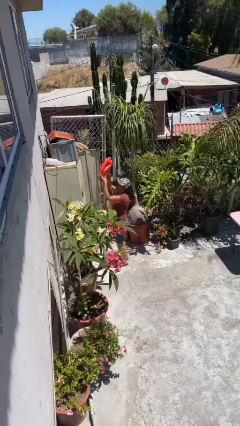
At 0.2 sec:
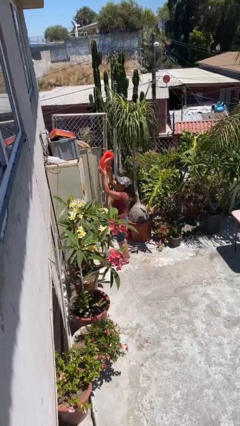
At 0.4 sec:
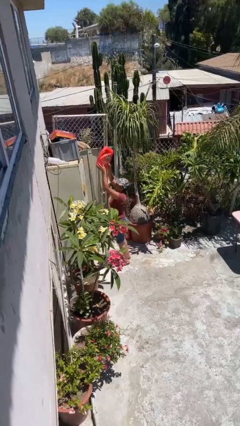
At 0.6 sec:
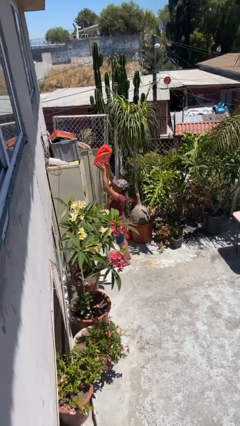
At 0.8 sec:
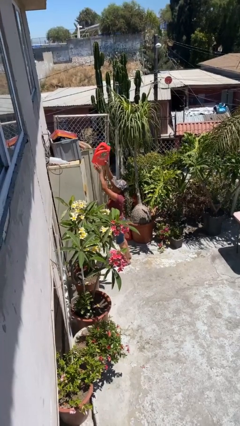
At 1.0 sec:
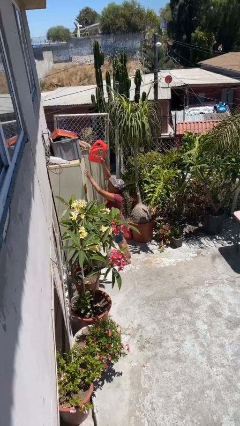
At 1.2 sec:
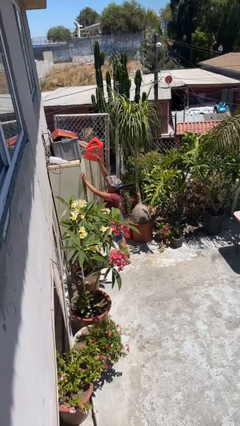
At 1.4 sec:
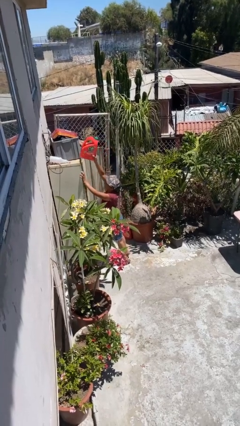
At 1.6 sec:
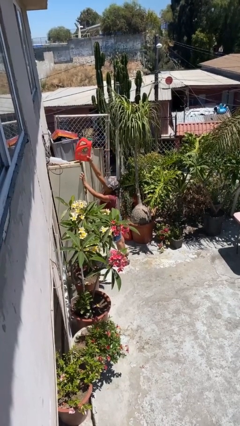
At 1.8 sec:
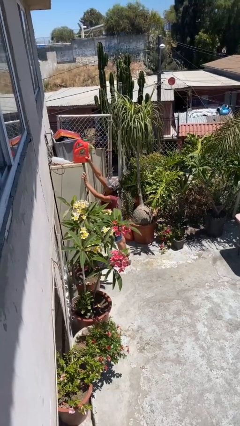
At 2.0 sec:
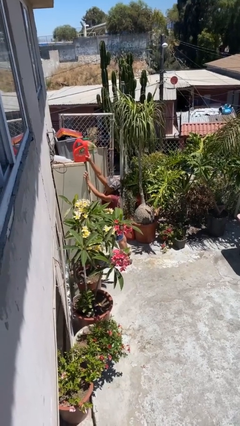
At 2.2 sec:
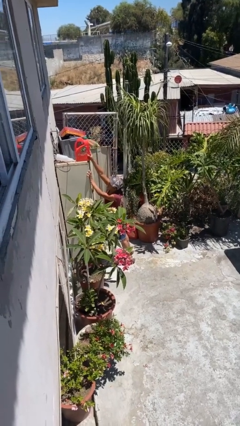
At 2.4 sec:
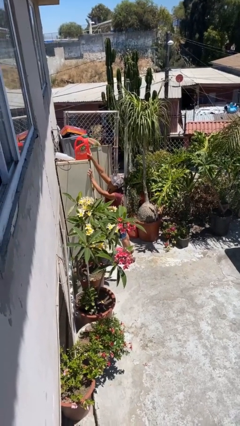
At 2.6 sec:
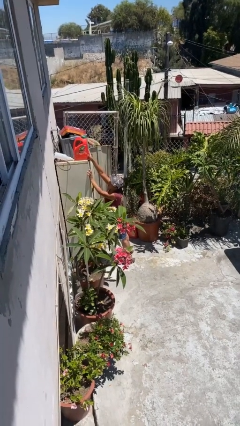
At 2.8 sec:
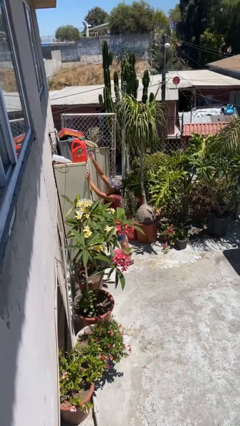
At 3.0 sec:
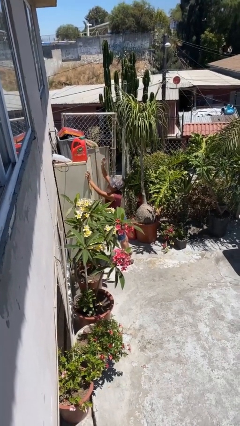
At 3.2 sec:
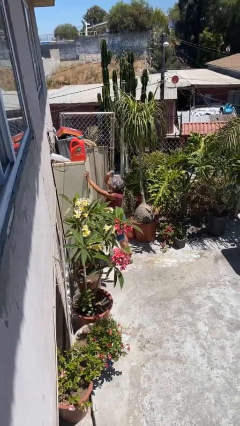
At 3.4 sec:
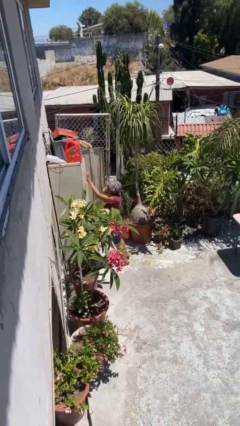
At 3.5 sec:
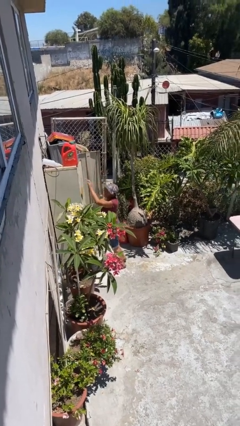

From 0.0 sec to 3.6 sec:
person puts down object on shelf

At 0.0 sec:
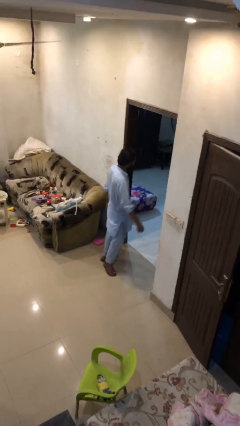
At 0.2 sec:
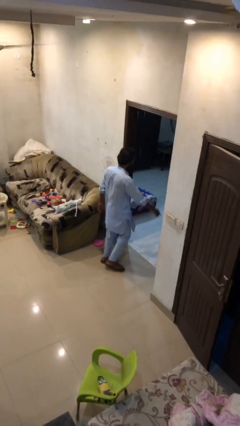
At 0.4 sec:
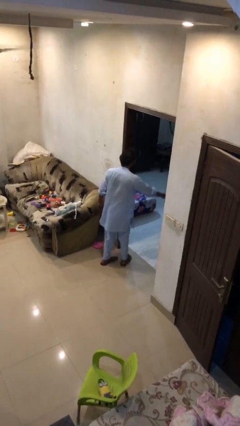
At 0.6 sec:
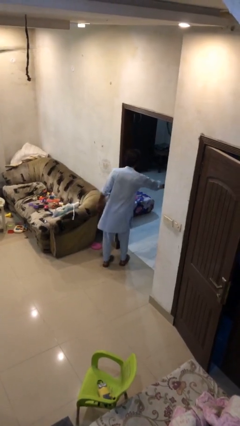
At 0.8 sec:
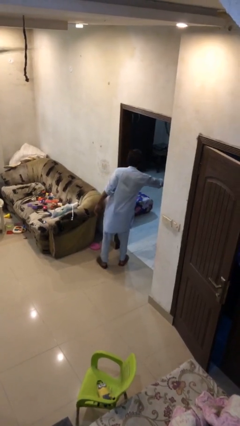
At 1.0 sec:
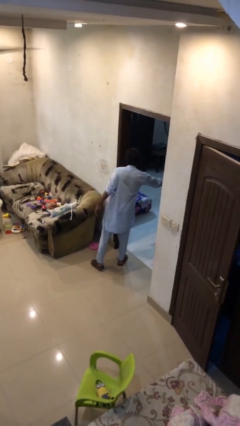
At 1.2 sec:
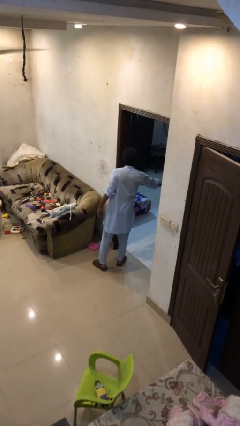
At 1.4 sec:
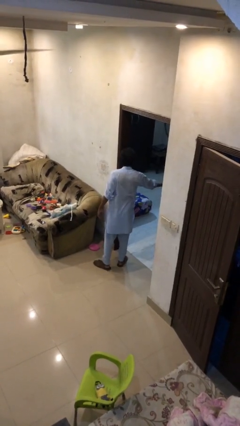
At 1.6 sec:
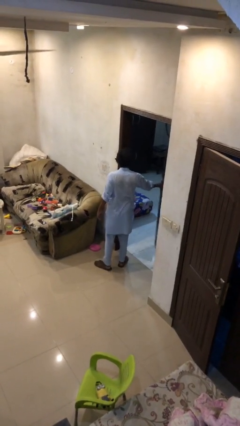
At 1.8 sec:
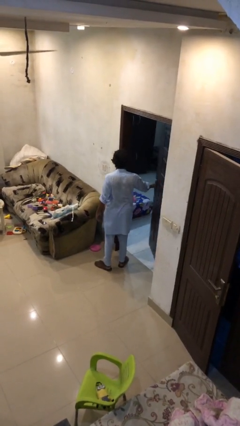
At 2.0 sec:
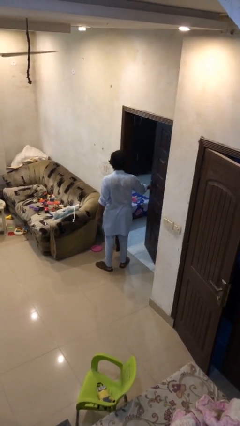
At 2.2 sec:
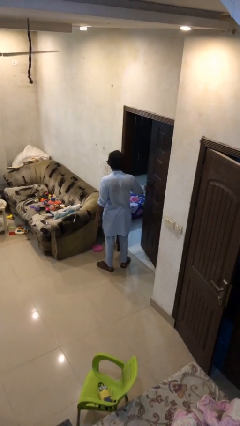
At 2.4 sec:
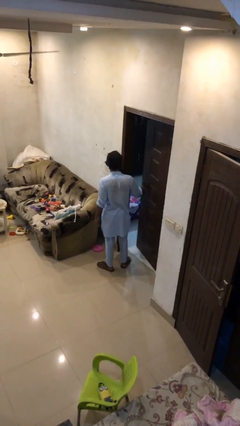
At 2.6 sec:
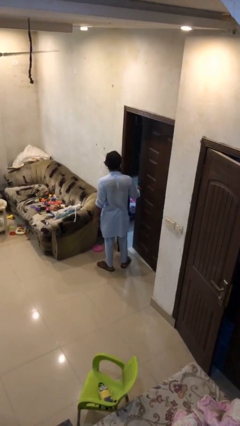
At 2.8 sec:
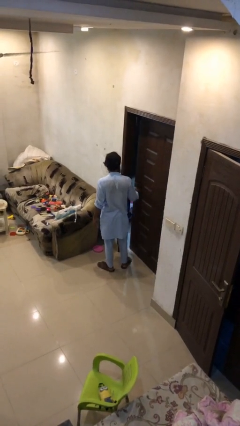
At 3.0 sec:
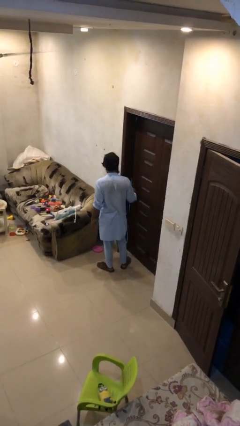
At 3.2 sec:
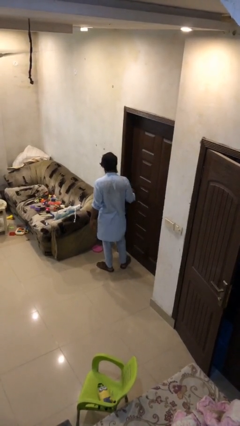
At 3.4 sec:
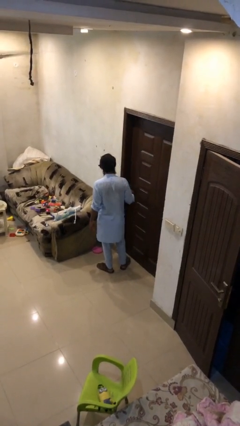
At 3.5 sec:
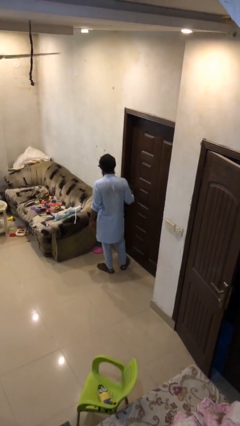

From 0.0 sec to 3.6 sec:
person closes facility door

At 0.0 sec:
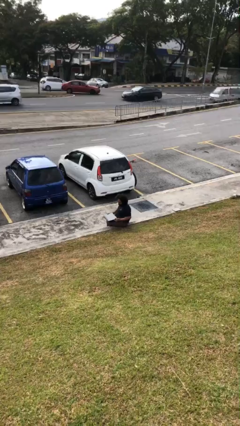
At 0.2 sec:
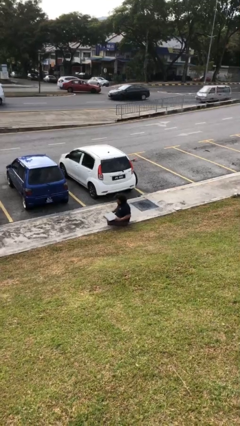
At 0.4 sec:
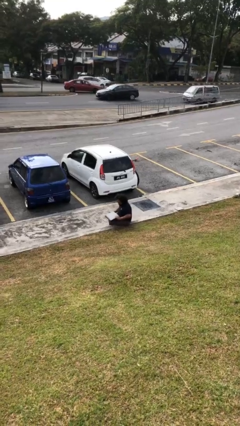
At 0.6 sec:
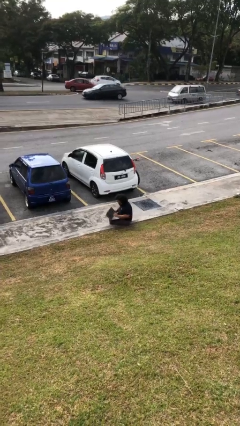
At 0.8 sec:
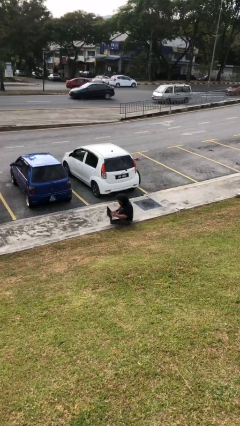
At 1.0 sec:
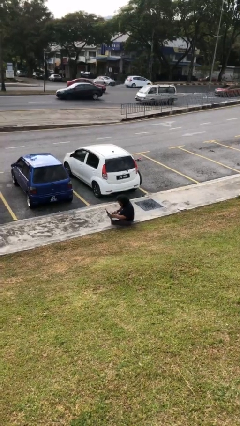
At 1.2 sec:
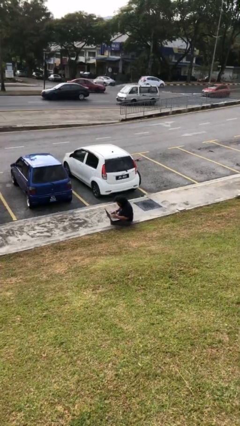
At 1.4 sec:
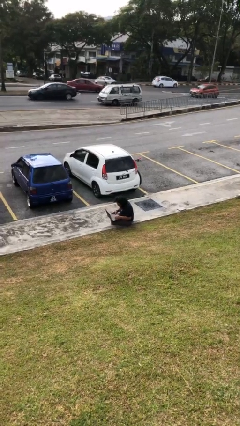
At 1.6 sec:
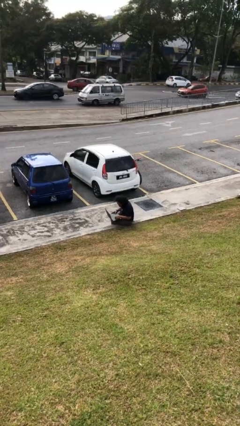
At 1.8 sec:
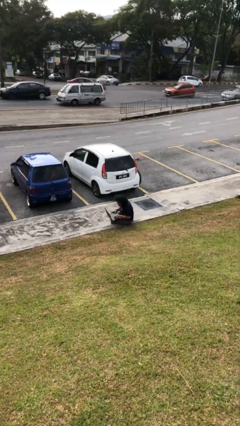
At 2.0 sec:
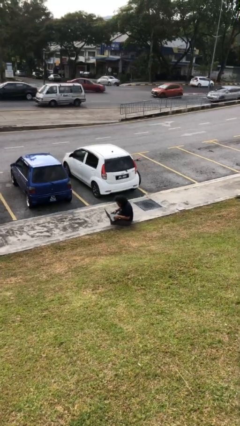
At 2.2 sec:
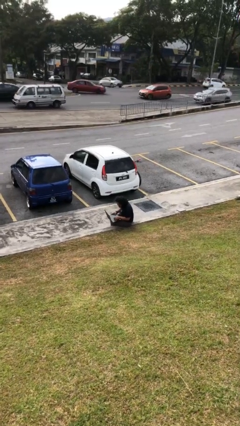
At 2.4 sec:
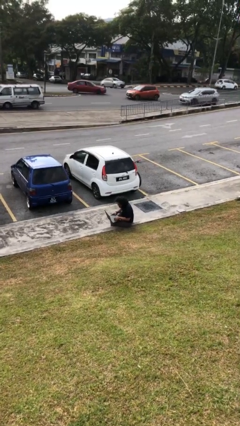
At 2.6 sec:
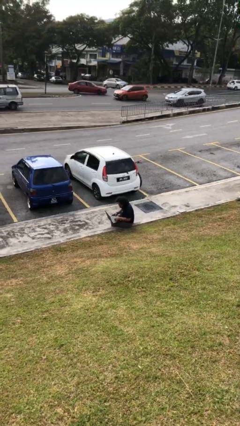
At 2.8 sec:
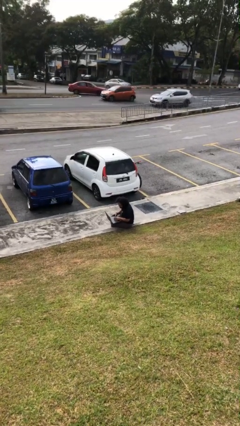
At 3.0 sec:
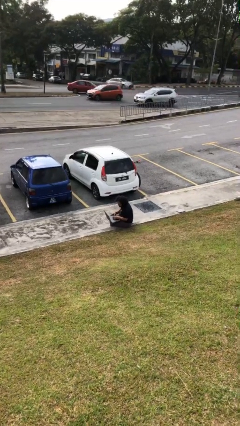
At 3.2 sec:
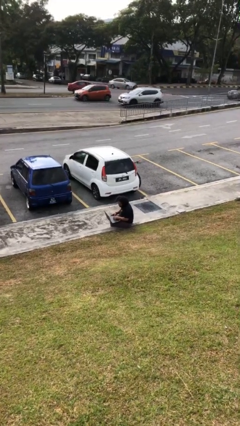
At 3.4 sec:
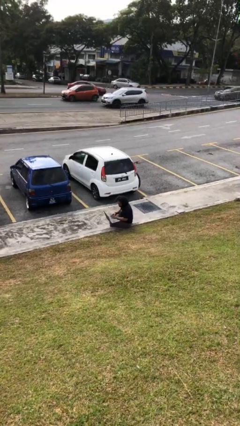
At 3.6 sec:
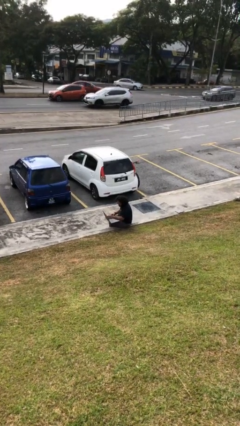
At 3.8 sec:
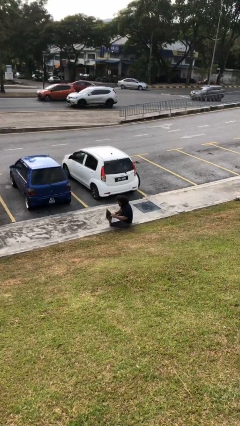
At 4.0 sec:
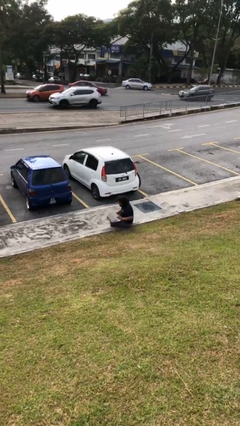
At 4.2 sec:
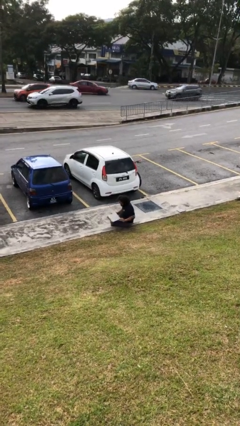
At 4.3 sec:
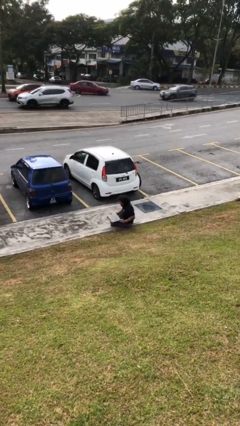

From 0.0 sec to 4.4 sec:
person interacts with laptop

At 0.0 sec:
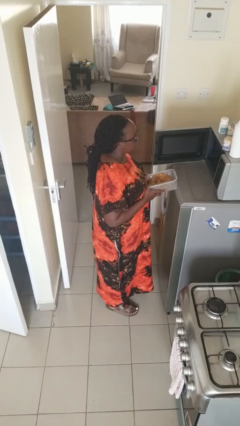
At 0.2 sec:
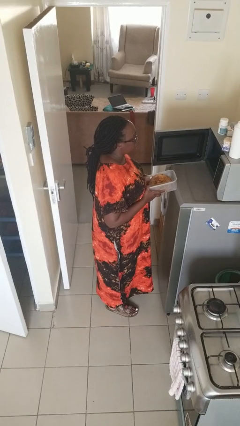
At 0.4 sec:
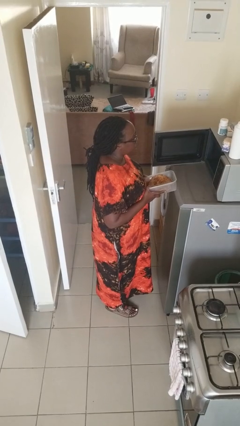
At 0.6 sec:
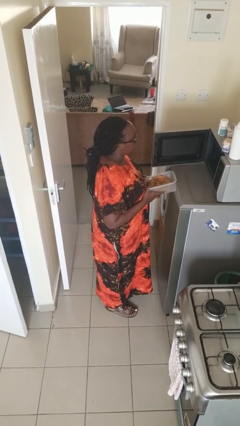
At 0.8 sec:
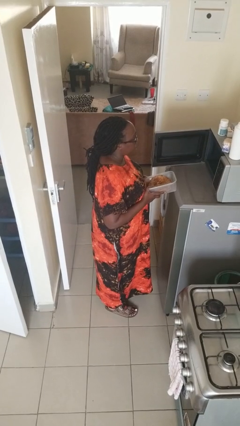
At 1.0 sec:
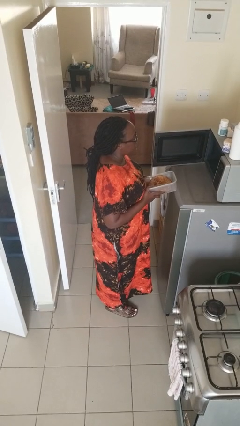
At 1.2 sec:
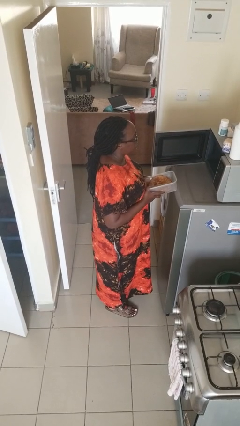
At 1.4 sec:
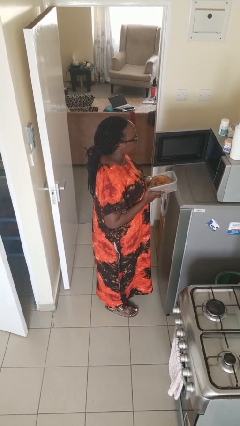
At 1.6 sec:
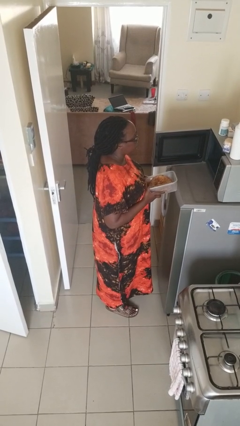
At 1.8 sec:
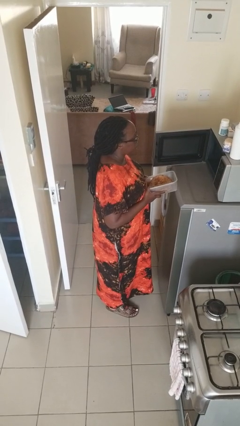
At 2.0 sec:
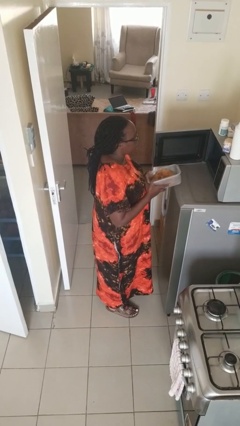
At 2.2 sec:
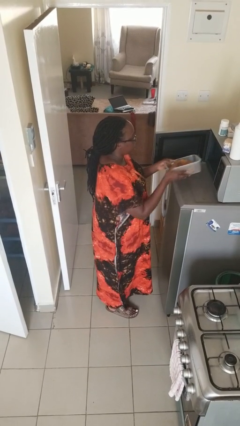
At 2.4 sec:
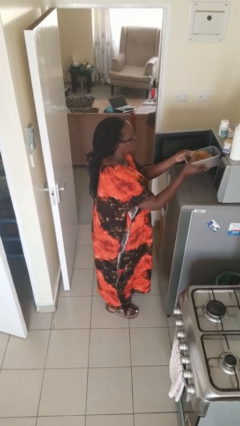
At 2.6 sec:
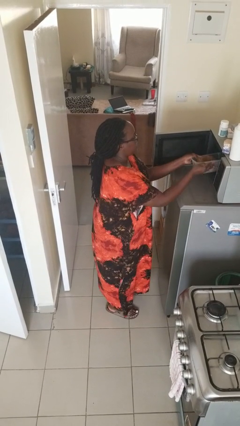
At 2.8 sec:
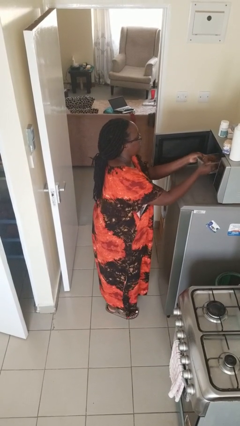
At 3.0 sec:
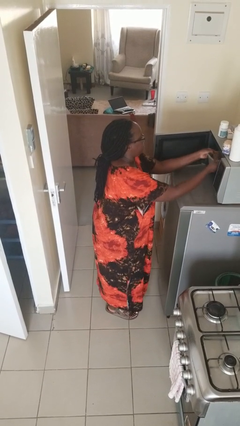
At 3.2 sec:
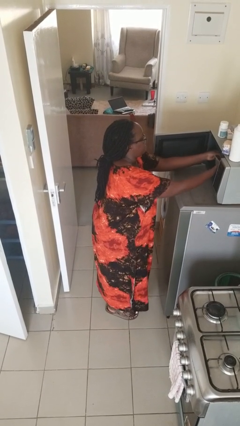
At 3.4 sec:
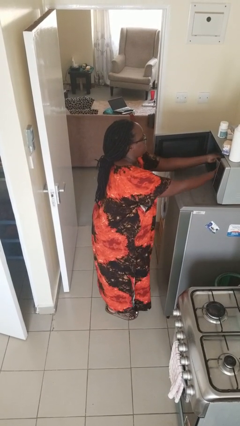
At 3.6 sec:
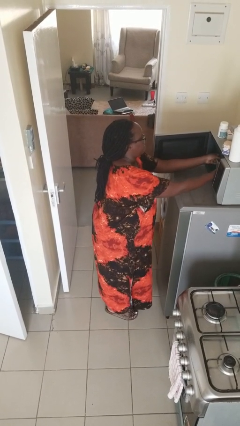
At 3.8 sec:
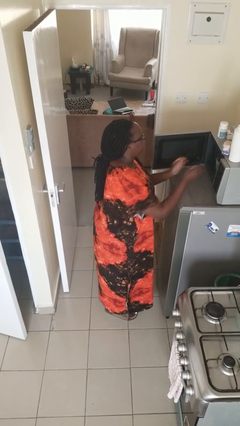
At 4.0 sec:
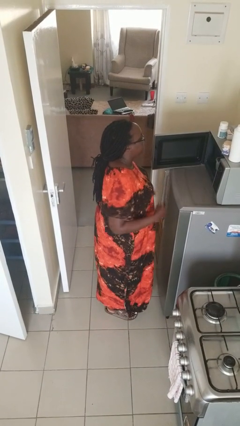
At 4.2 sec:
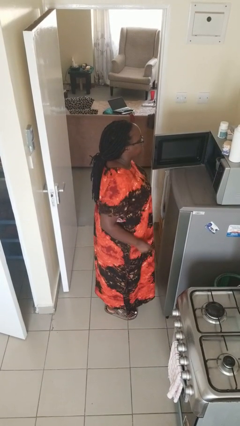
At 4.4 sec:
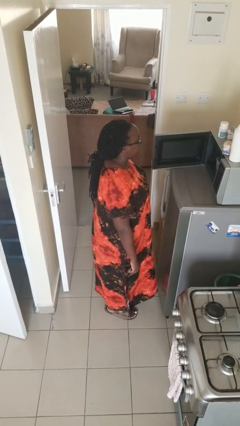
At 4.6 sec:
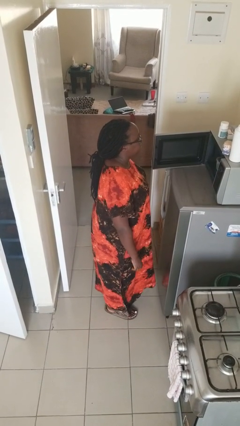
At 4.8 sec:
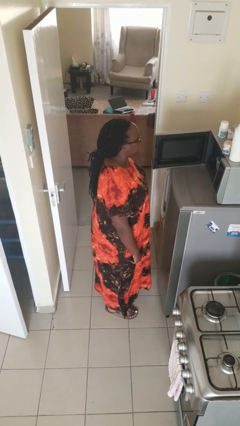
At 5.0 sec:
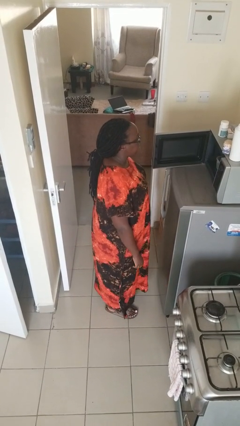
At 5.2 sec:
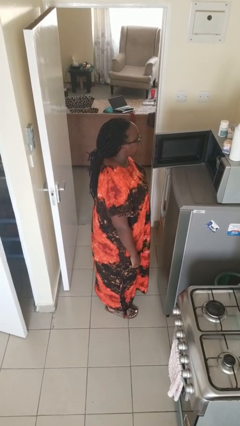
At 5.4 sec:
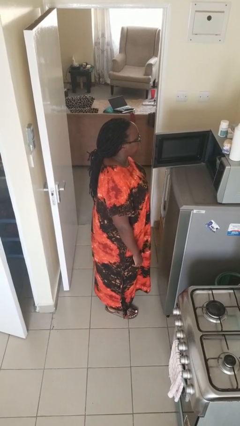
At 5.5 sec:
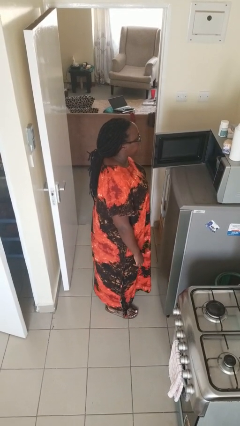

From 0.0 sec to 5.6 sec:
person puts object into microwave

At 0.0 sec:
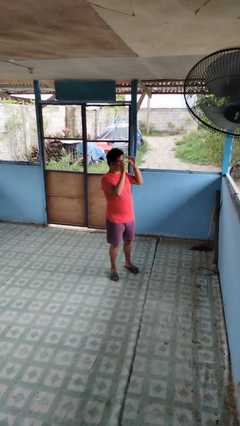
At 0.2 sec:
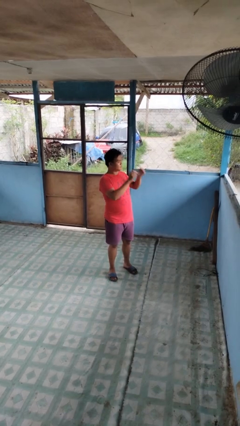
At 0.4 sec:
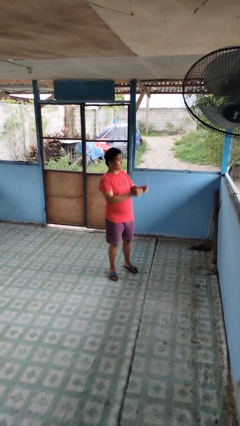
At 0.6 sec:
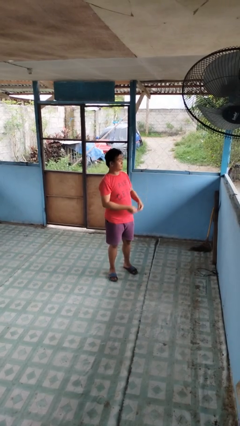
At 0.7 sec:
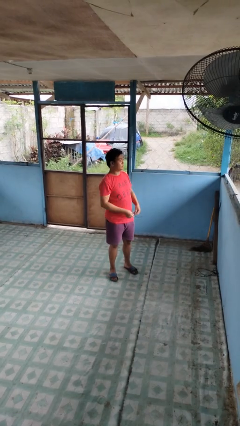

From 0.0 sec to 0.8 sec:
person takes off glasses
